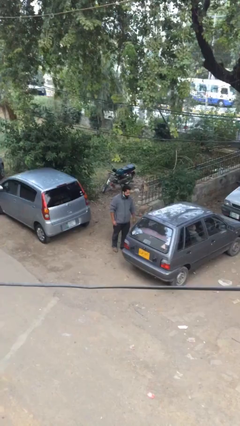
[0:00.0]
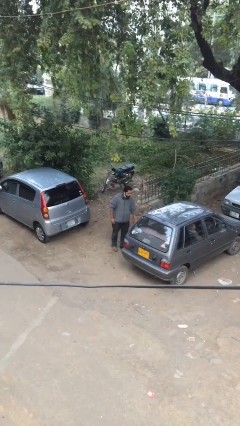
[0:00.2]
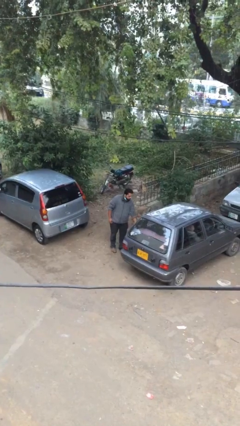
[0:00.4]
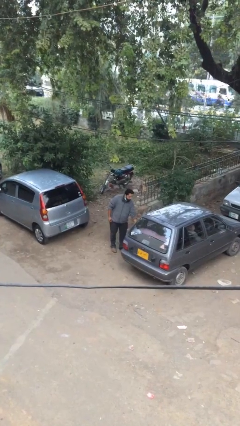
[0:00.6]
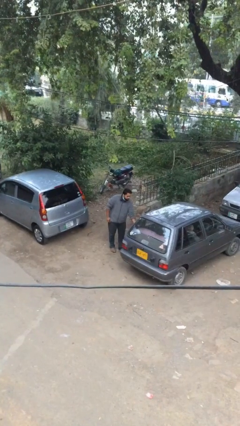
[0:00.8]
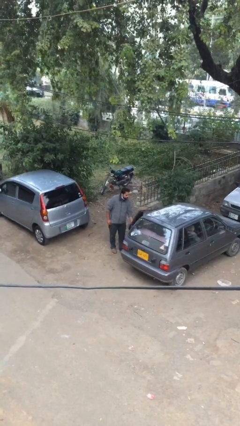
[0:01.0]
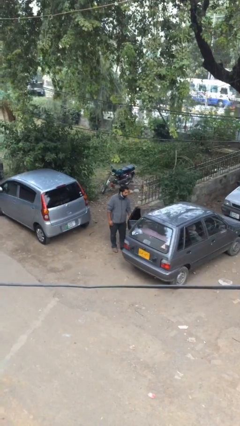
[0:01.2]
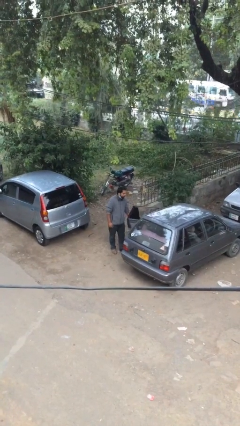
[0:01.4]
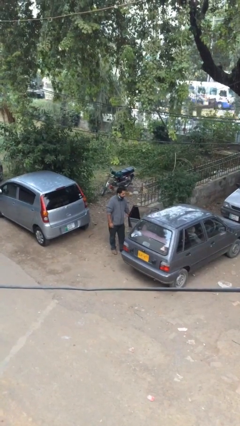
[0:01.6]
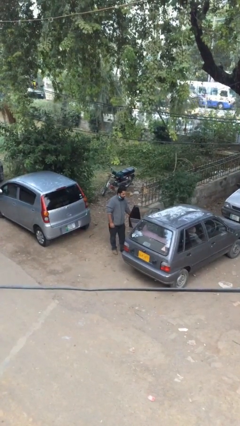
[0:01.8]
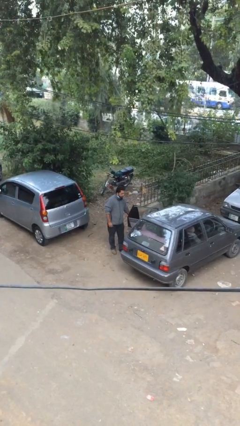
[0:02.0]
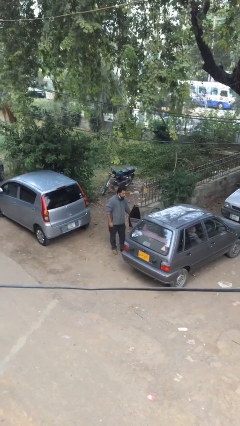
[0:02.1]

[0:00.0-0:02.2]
person opens car door

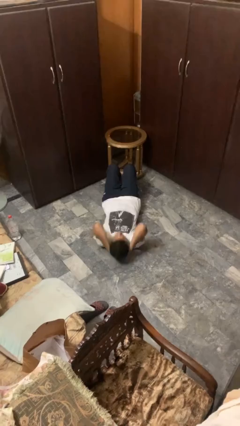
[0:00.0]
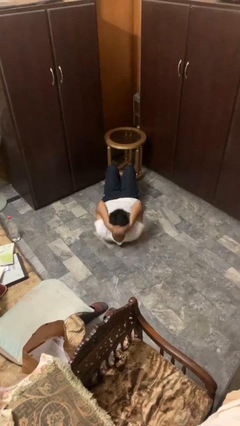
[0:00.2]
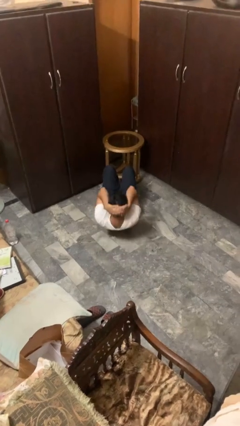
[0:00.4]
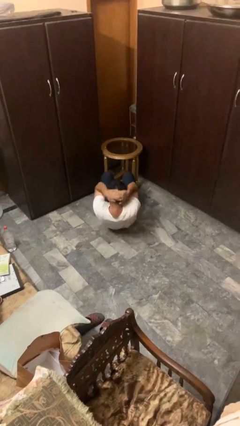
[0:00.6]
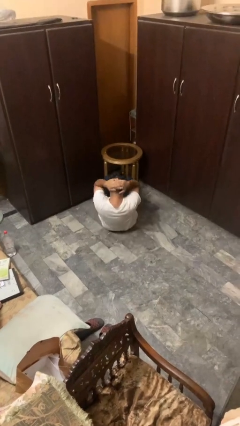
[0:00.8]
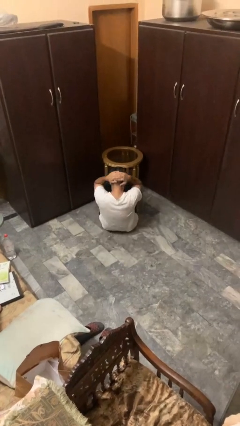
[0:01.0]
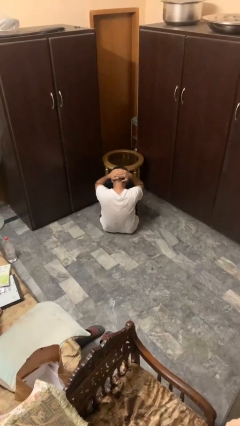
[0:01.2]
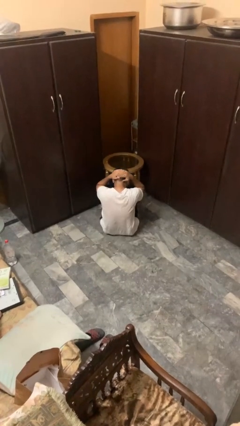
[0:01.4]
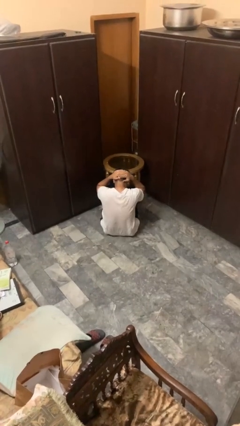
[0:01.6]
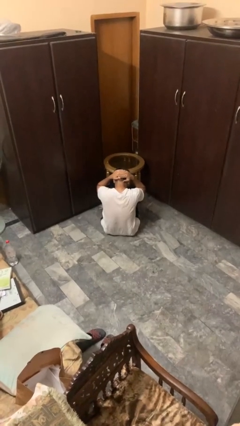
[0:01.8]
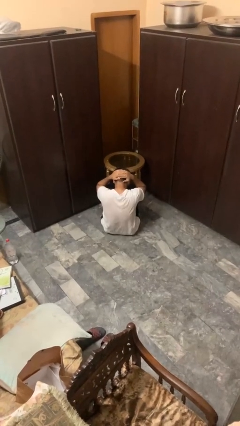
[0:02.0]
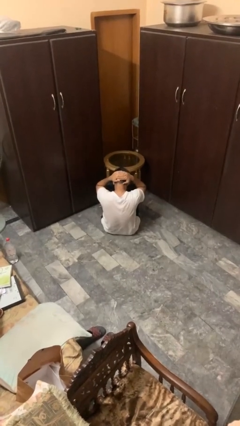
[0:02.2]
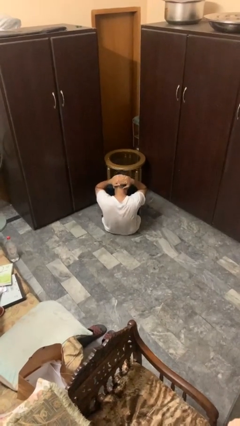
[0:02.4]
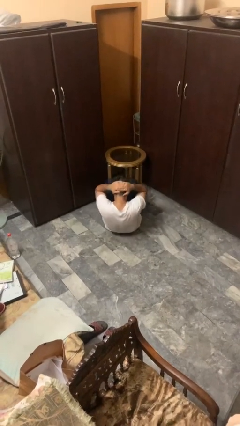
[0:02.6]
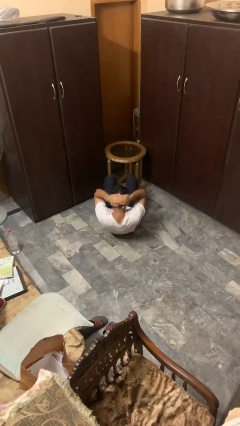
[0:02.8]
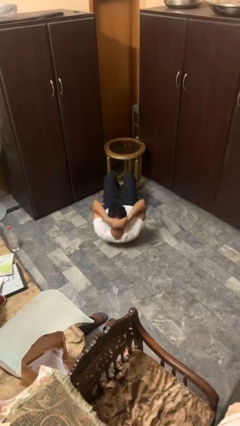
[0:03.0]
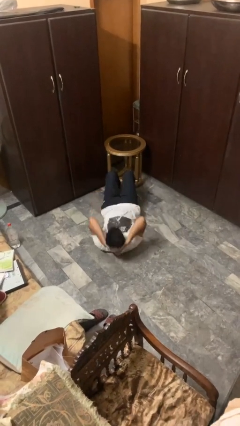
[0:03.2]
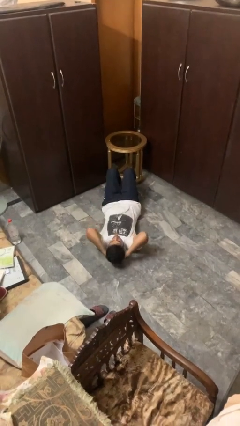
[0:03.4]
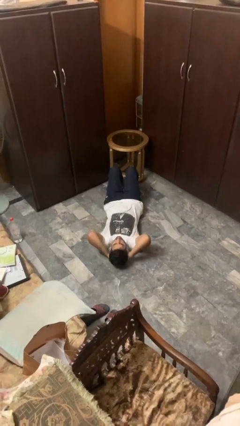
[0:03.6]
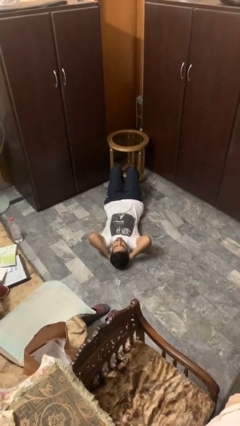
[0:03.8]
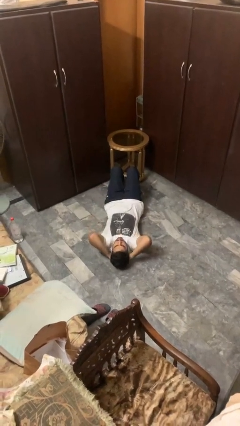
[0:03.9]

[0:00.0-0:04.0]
person exercises with situp

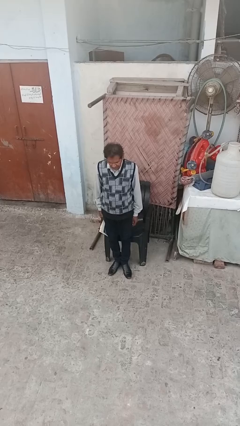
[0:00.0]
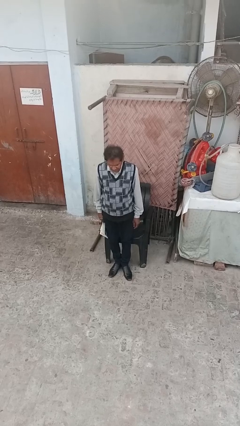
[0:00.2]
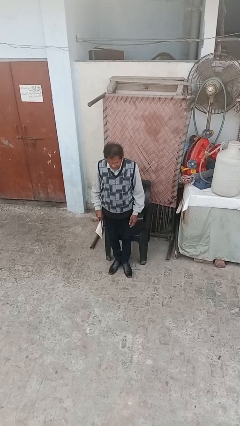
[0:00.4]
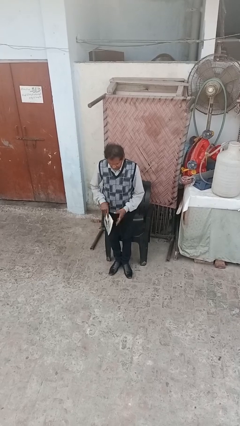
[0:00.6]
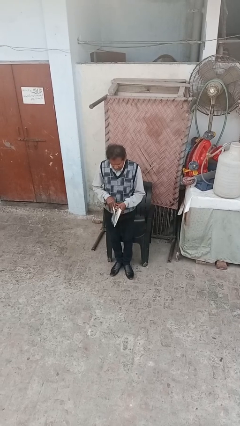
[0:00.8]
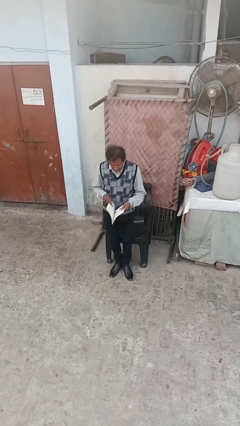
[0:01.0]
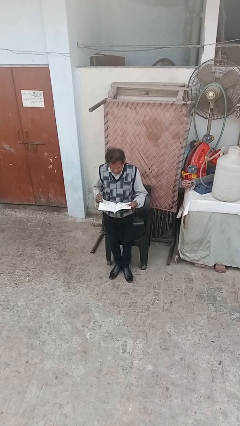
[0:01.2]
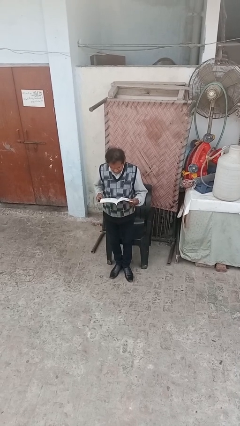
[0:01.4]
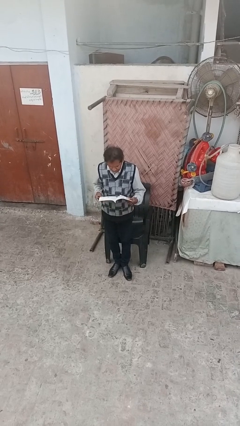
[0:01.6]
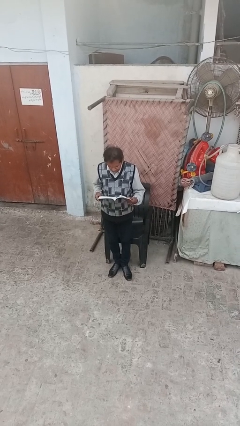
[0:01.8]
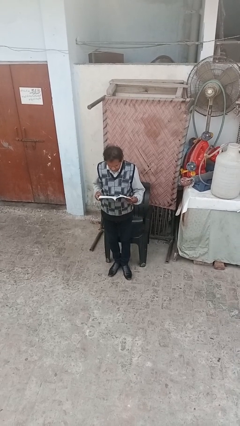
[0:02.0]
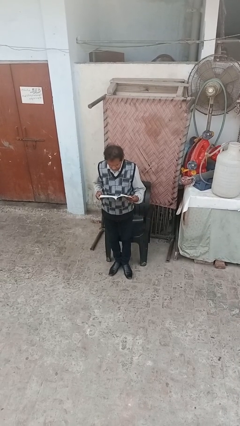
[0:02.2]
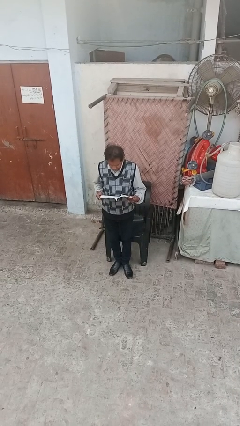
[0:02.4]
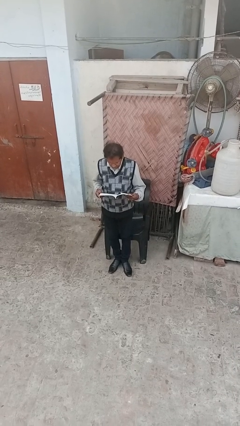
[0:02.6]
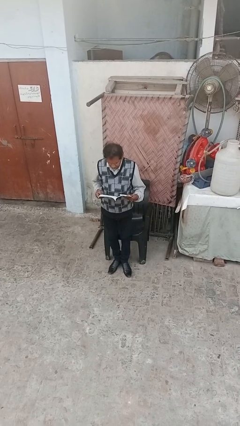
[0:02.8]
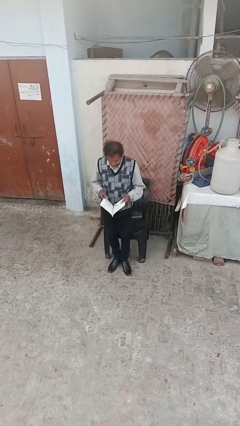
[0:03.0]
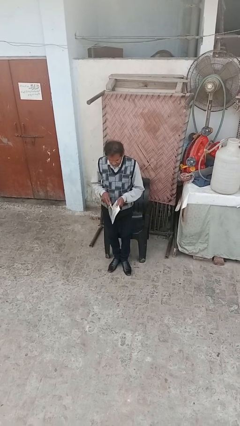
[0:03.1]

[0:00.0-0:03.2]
person reads document

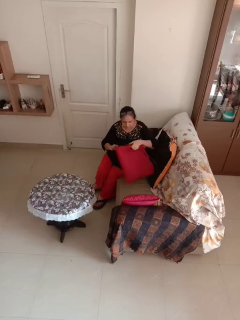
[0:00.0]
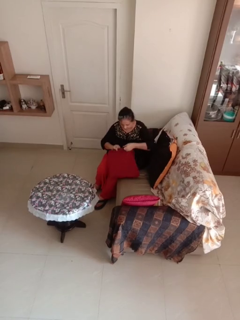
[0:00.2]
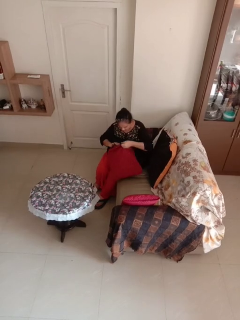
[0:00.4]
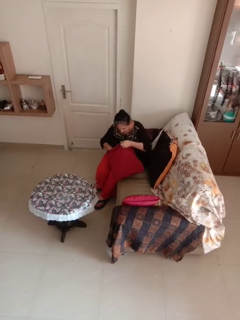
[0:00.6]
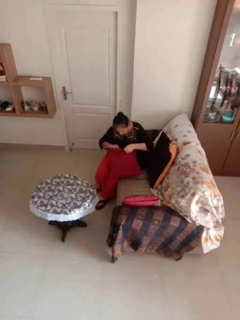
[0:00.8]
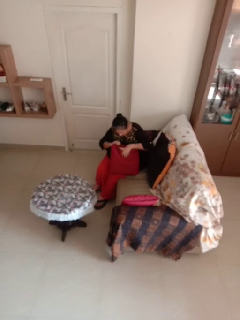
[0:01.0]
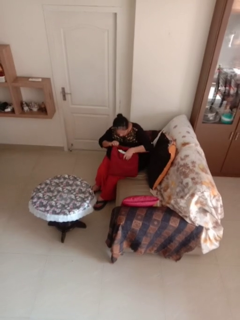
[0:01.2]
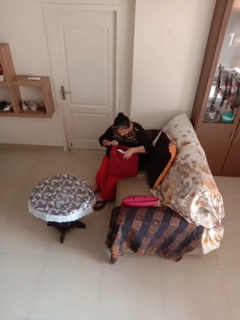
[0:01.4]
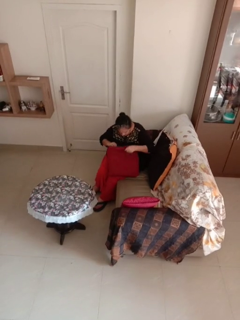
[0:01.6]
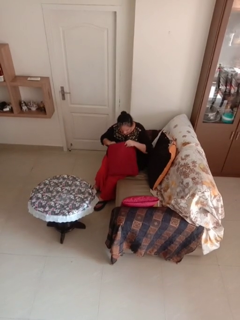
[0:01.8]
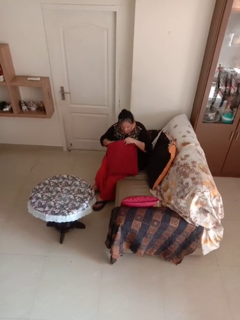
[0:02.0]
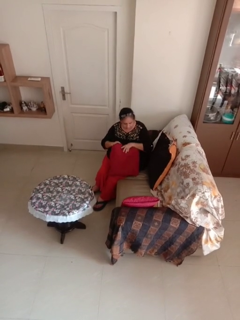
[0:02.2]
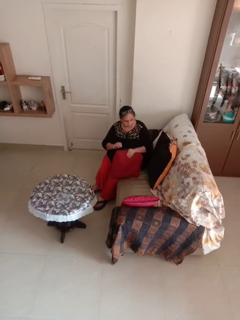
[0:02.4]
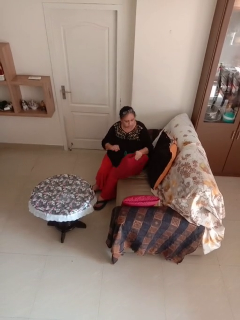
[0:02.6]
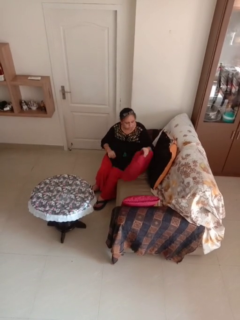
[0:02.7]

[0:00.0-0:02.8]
person searches in couch

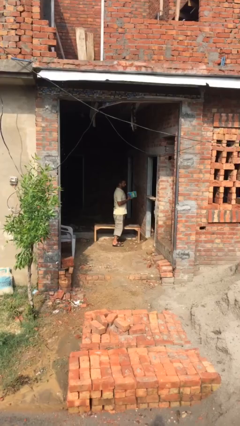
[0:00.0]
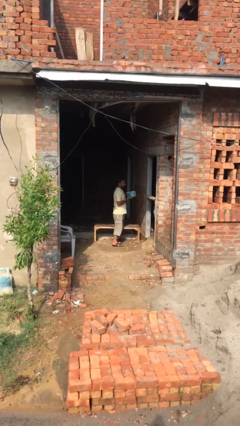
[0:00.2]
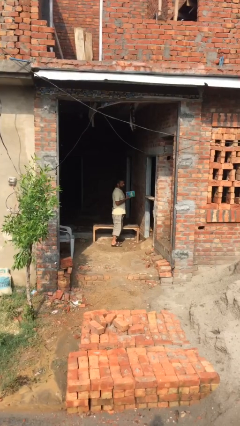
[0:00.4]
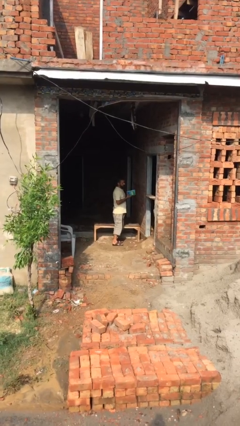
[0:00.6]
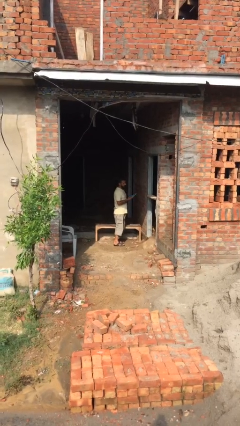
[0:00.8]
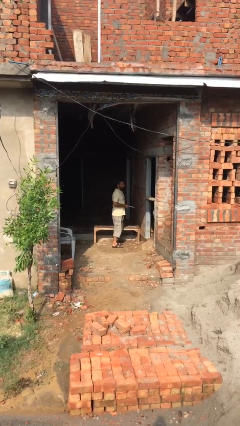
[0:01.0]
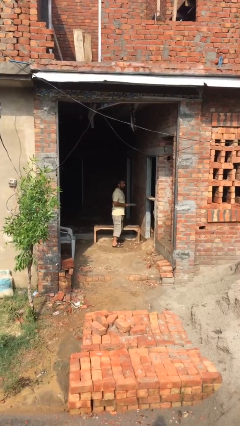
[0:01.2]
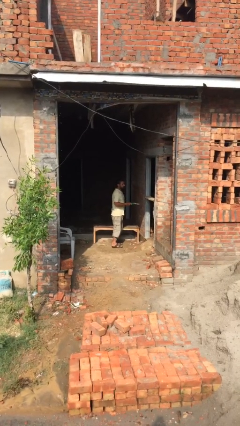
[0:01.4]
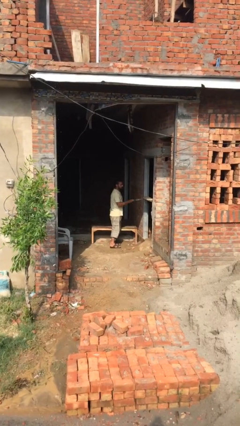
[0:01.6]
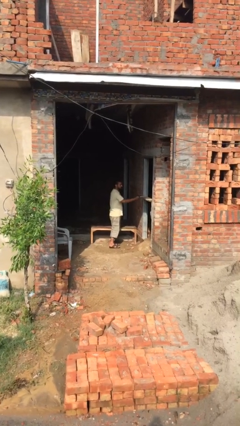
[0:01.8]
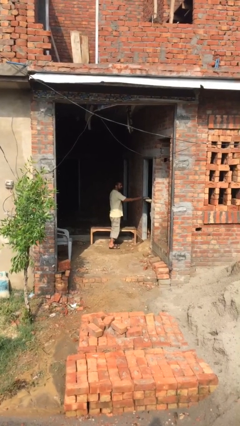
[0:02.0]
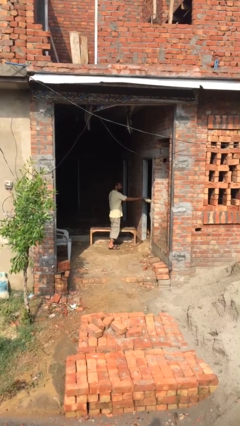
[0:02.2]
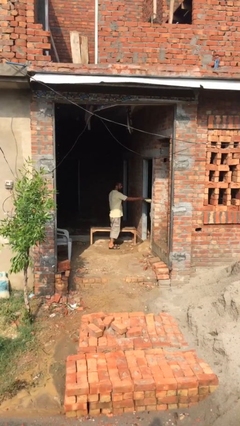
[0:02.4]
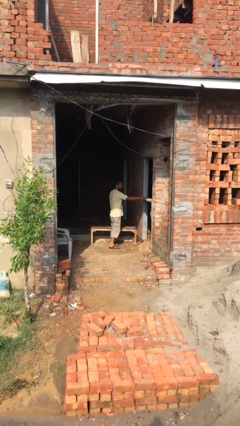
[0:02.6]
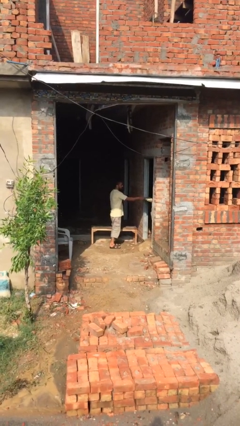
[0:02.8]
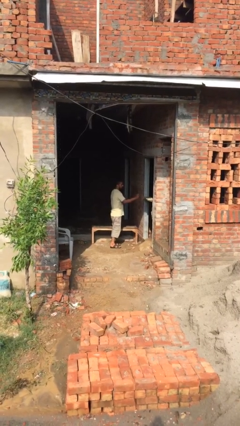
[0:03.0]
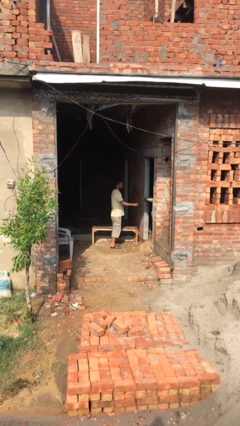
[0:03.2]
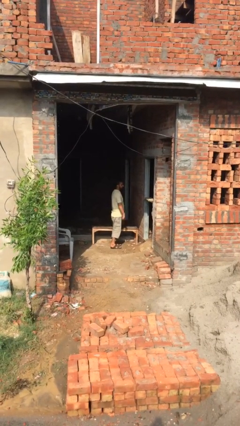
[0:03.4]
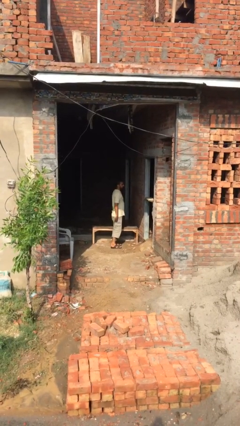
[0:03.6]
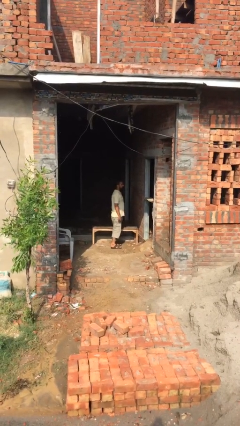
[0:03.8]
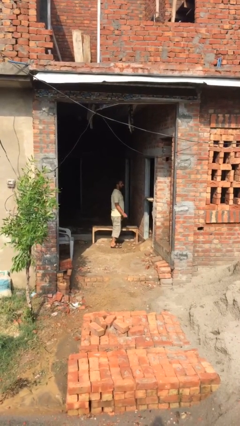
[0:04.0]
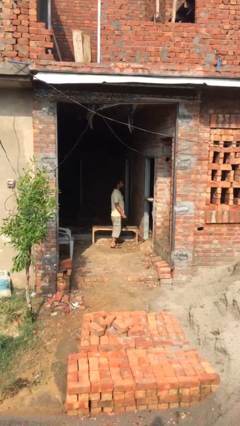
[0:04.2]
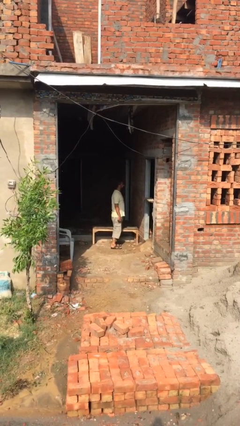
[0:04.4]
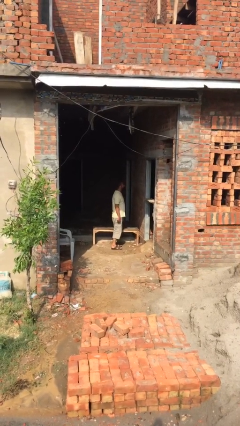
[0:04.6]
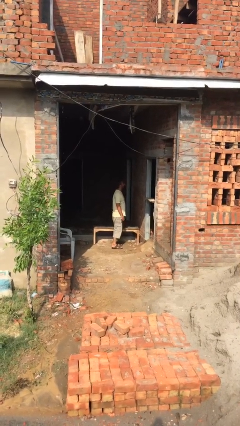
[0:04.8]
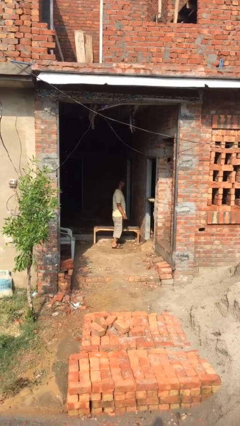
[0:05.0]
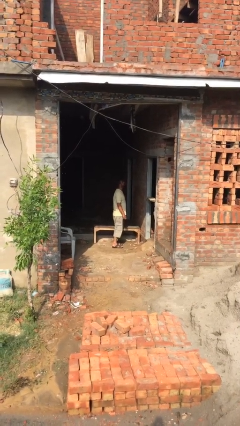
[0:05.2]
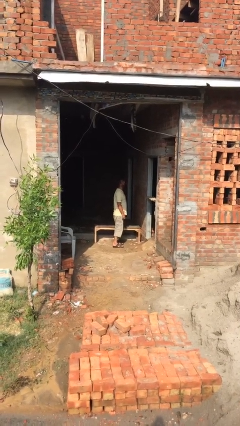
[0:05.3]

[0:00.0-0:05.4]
person puts down object on shelf

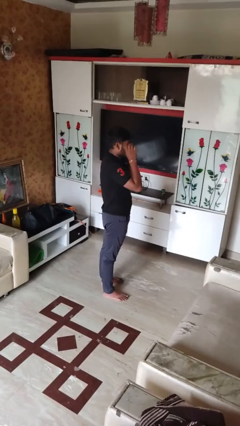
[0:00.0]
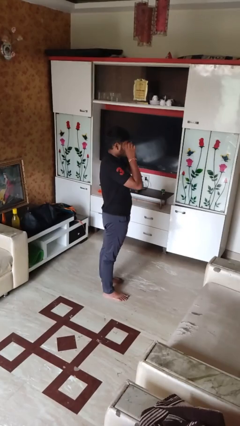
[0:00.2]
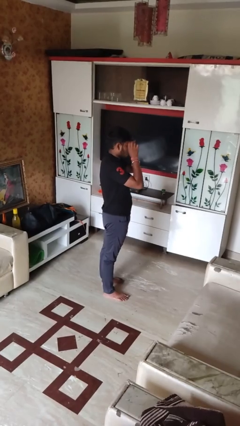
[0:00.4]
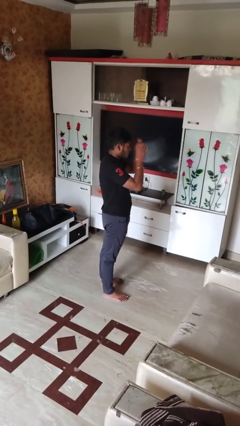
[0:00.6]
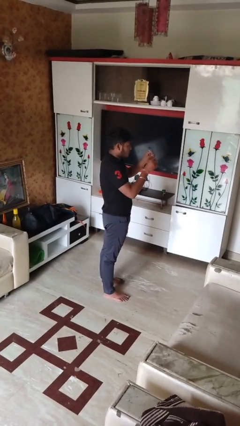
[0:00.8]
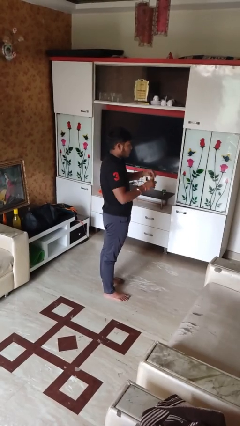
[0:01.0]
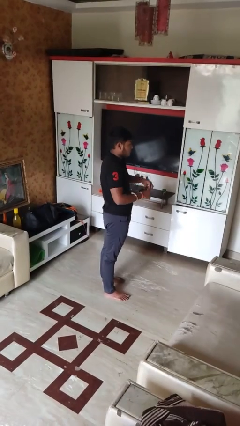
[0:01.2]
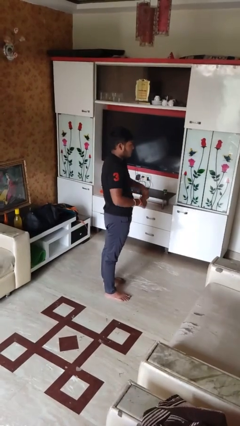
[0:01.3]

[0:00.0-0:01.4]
person takes off sunglasses
